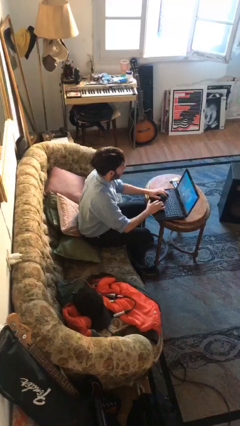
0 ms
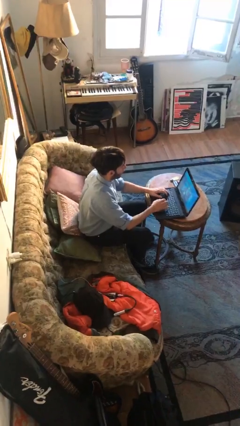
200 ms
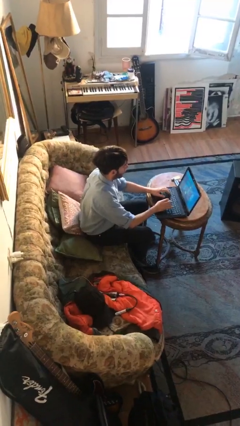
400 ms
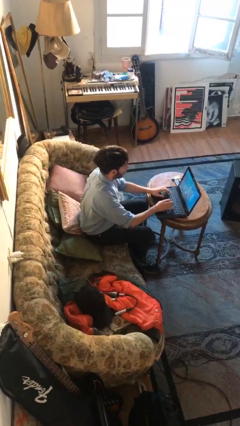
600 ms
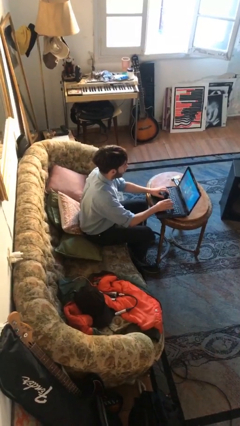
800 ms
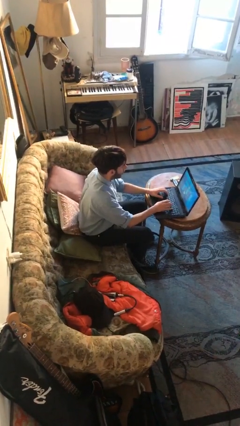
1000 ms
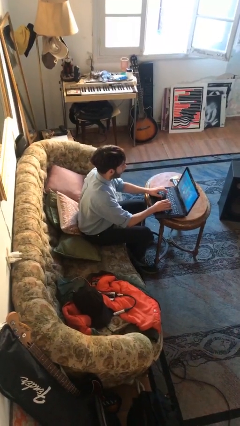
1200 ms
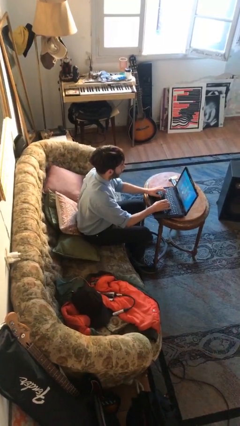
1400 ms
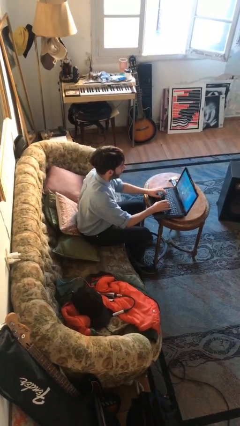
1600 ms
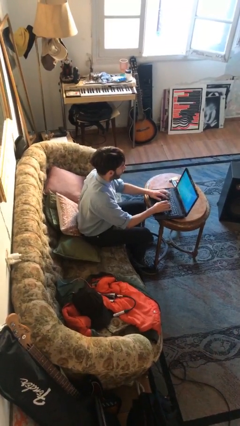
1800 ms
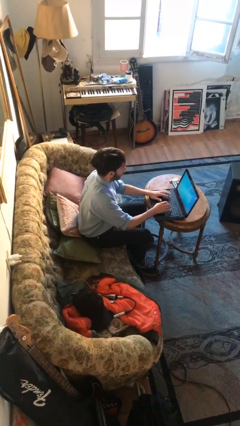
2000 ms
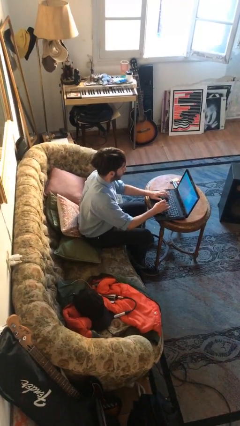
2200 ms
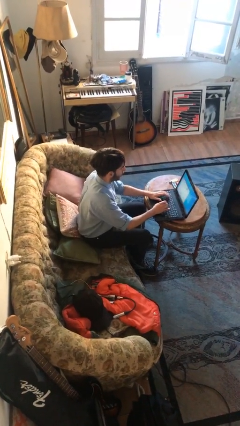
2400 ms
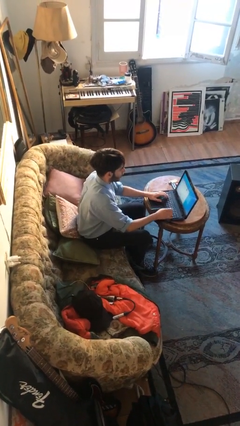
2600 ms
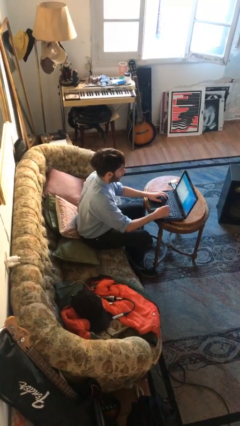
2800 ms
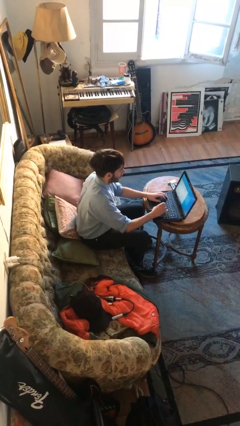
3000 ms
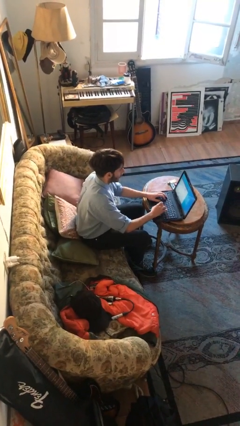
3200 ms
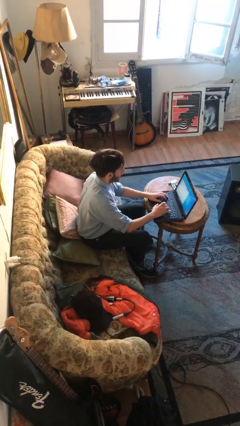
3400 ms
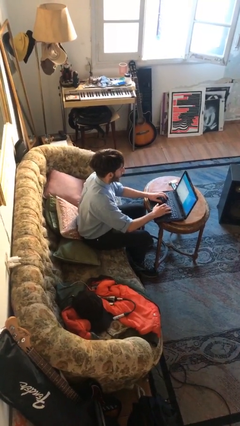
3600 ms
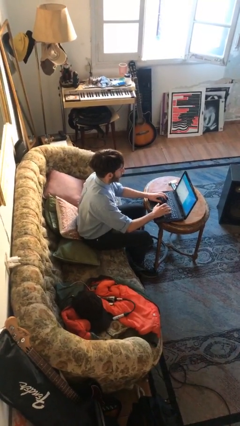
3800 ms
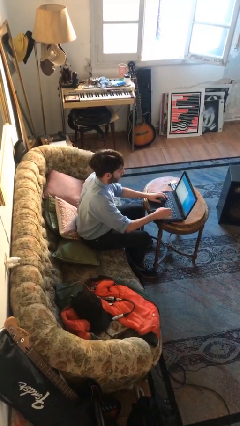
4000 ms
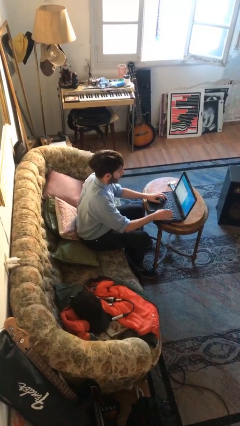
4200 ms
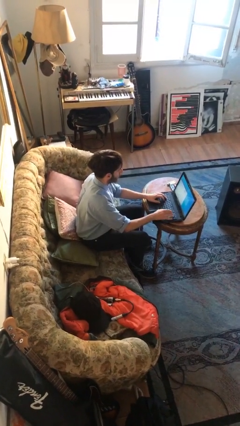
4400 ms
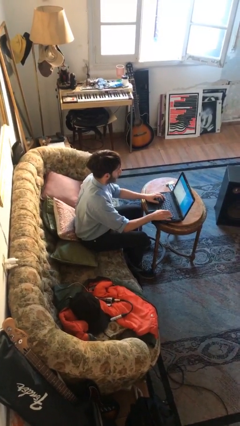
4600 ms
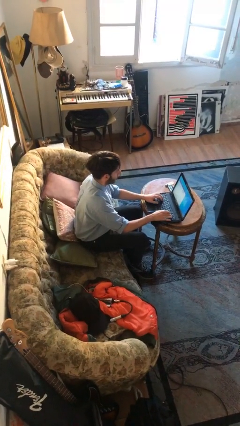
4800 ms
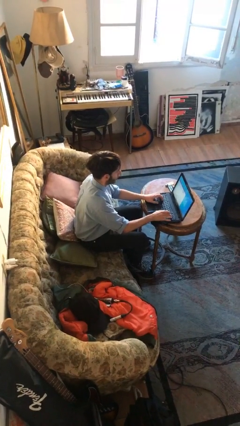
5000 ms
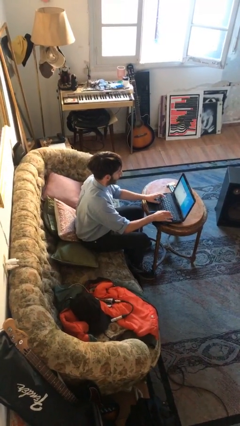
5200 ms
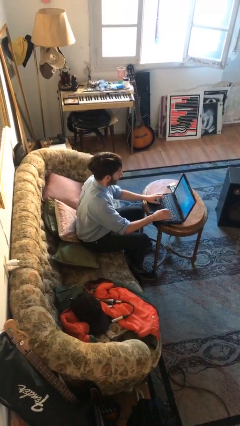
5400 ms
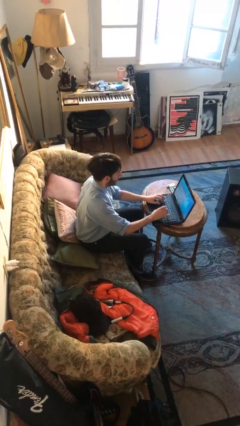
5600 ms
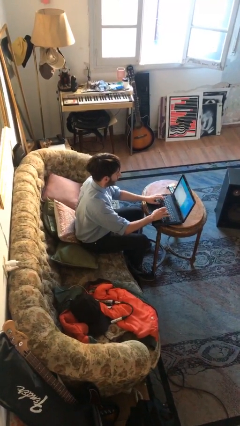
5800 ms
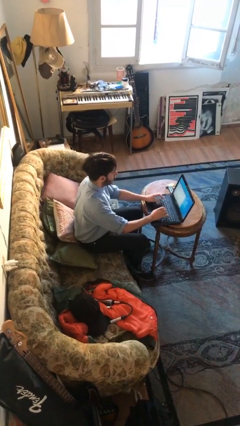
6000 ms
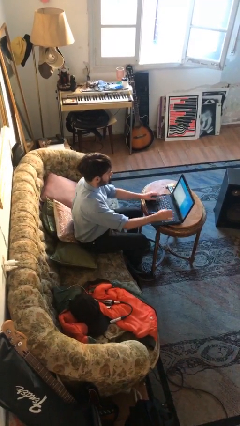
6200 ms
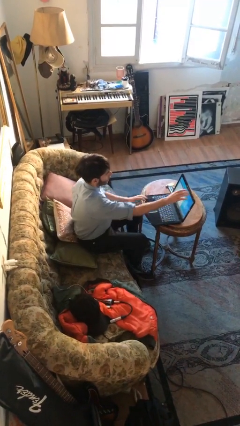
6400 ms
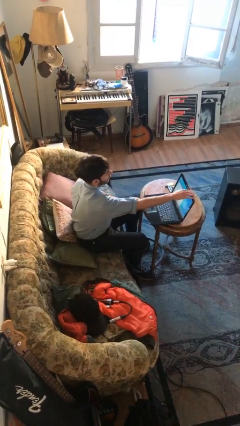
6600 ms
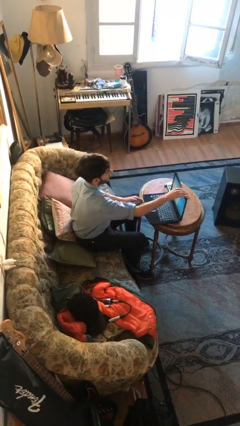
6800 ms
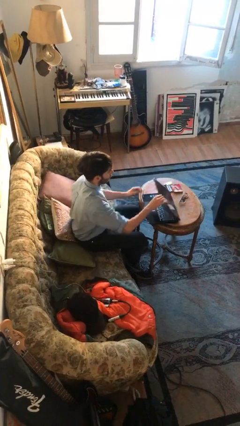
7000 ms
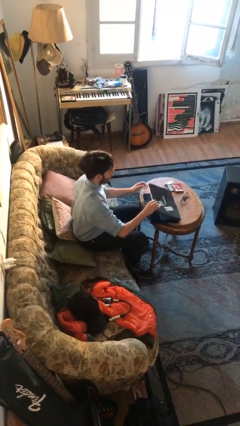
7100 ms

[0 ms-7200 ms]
person interacts with laptop

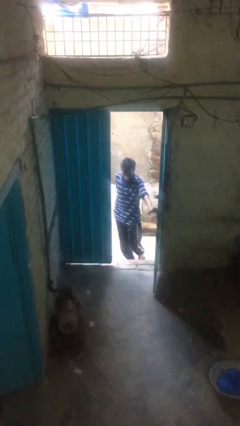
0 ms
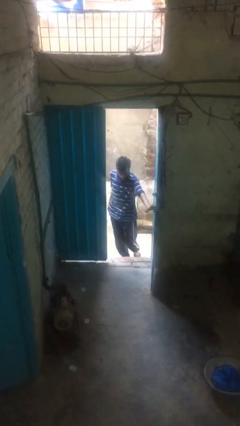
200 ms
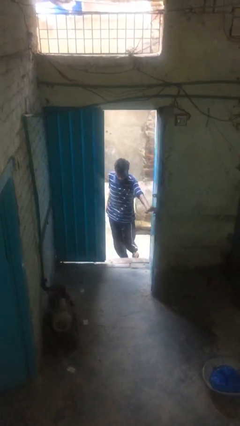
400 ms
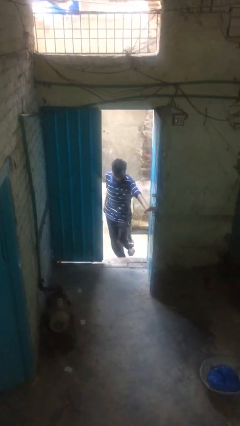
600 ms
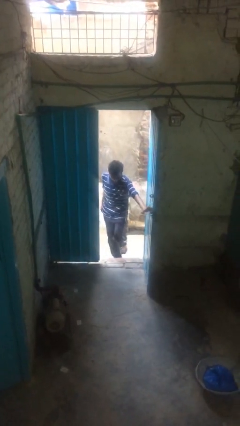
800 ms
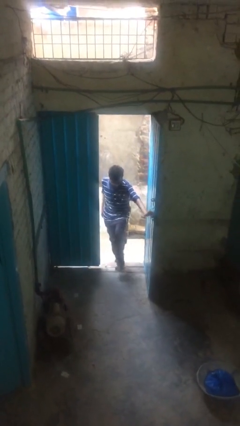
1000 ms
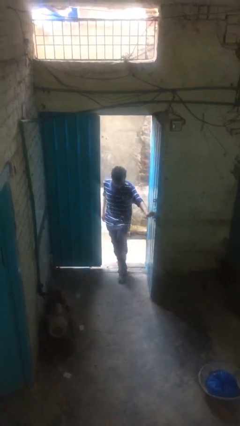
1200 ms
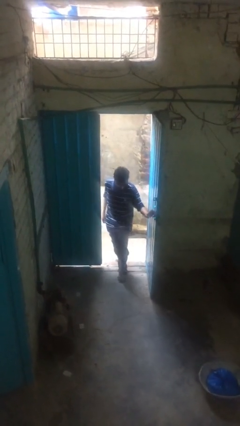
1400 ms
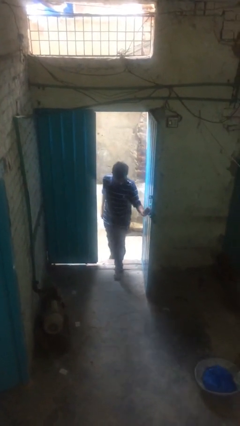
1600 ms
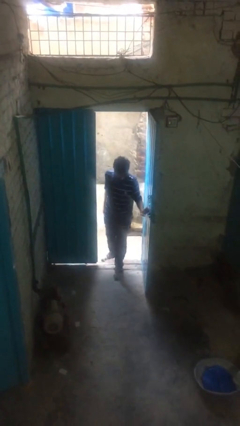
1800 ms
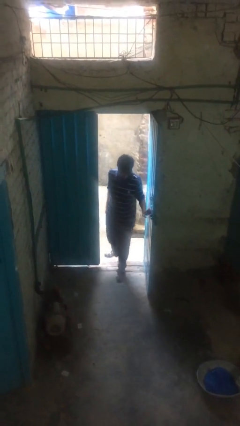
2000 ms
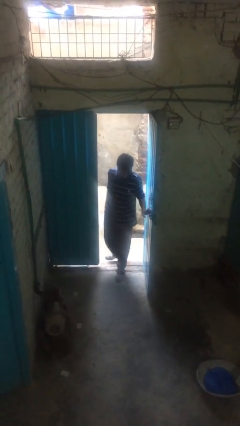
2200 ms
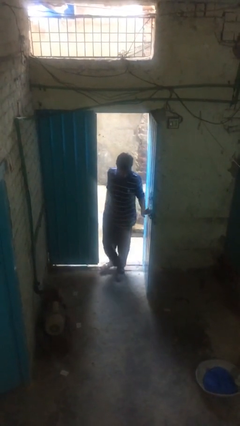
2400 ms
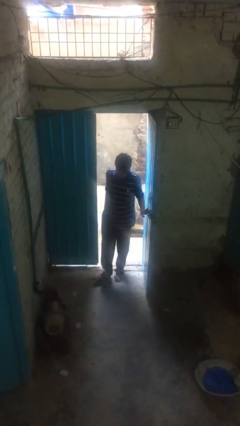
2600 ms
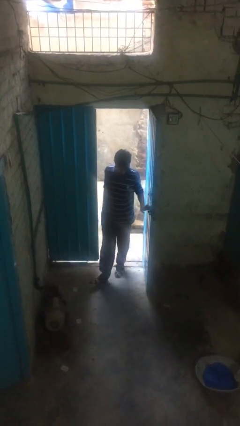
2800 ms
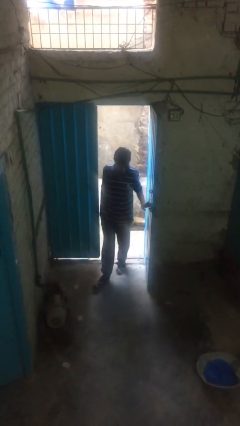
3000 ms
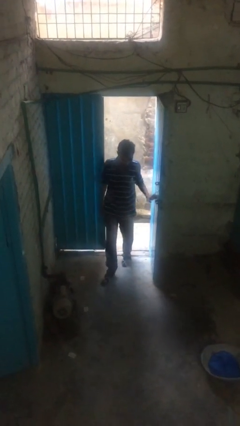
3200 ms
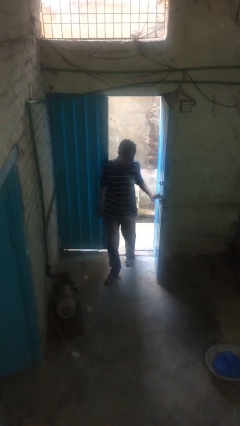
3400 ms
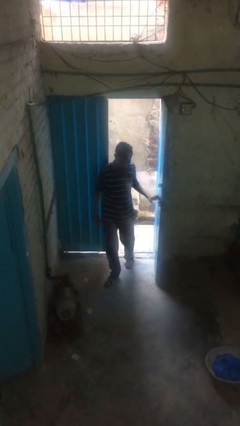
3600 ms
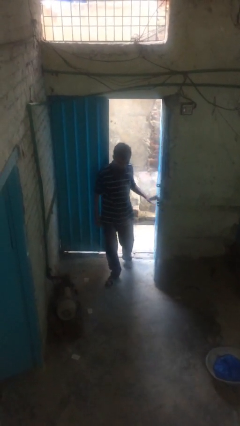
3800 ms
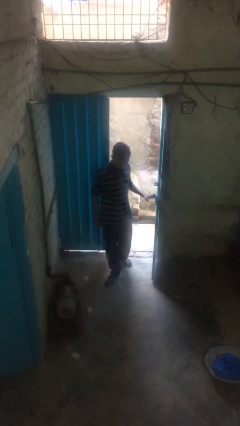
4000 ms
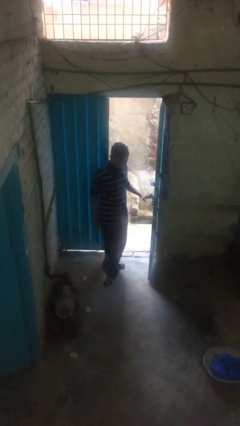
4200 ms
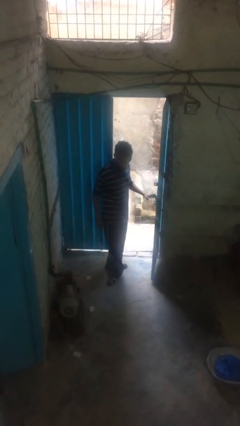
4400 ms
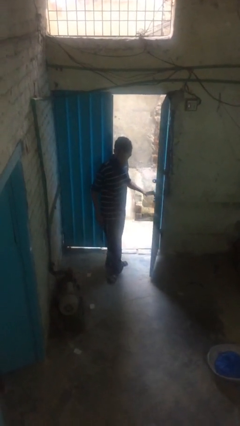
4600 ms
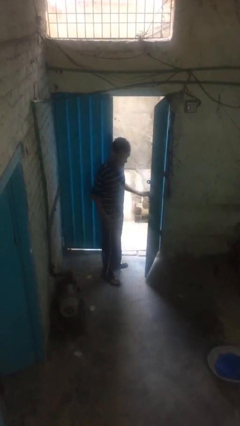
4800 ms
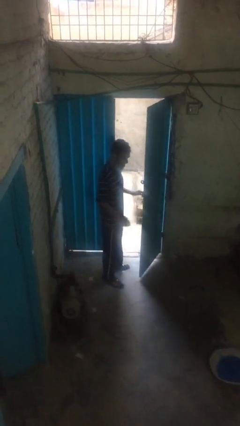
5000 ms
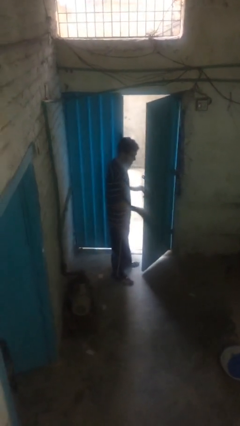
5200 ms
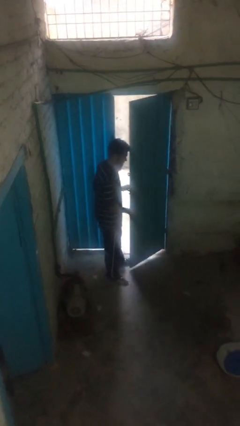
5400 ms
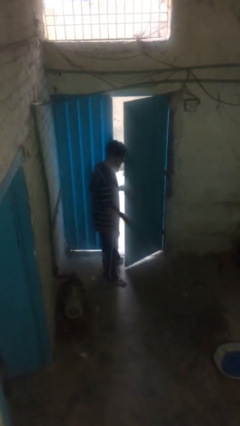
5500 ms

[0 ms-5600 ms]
person enters scene through structure

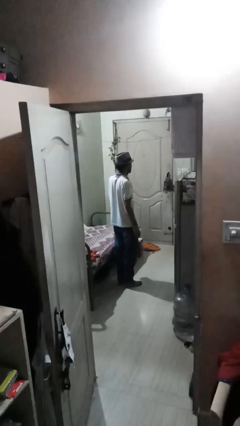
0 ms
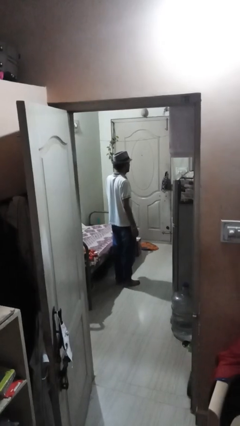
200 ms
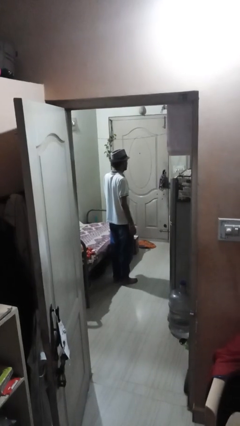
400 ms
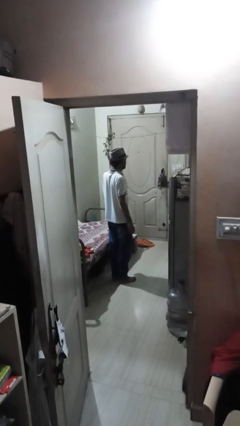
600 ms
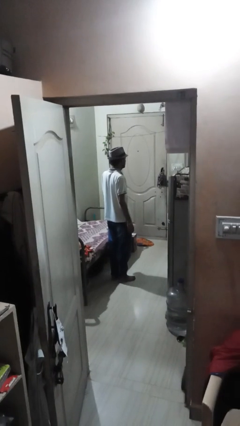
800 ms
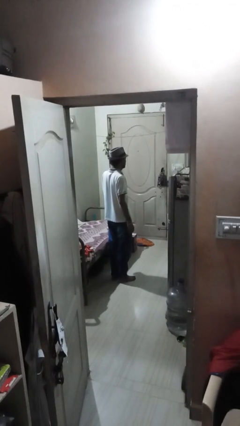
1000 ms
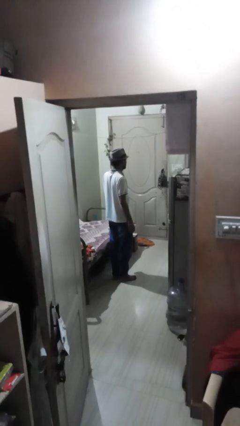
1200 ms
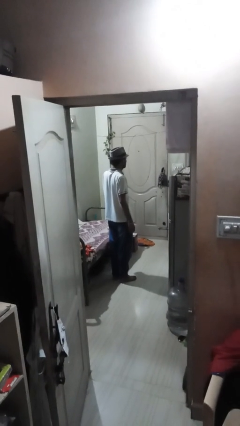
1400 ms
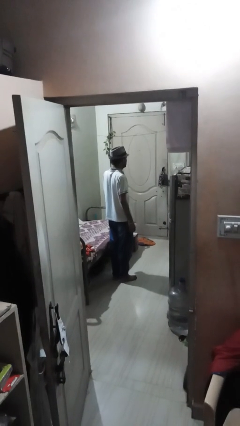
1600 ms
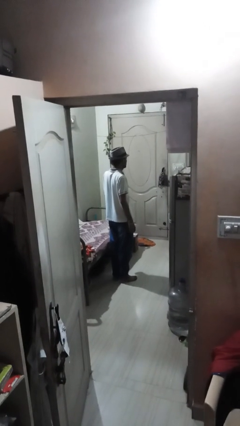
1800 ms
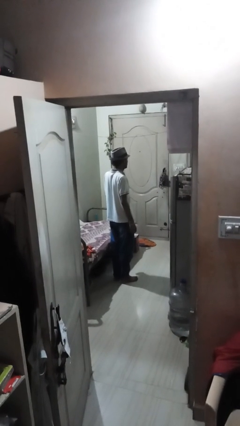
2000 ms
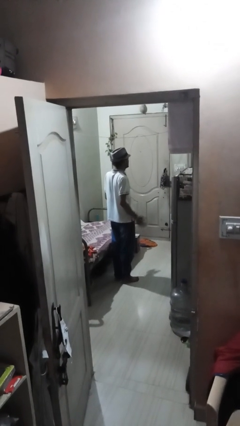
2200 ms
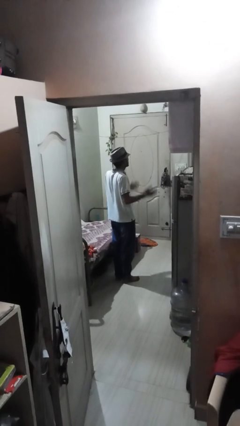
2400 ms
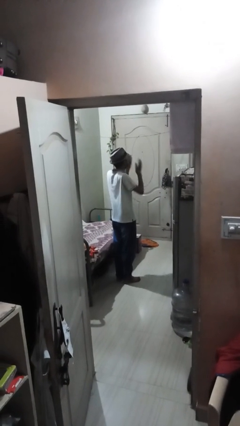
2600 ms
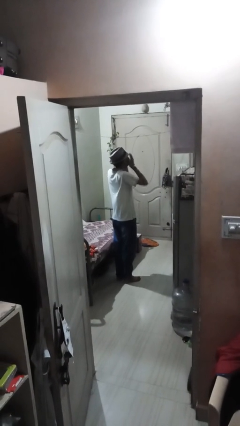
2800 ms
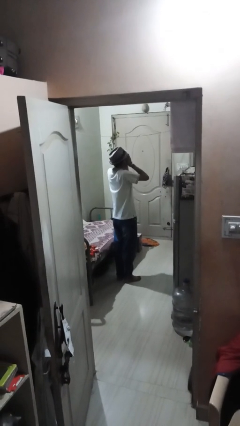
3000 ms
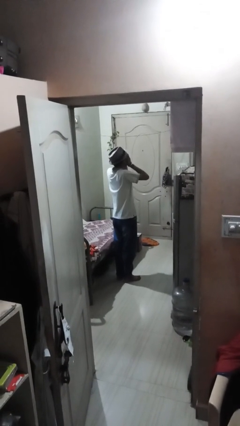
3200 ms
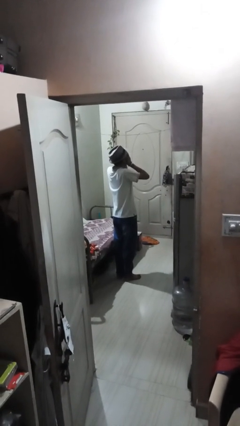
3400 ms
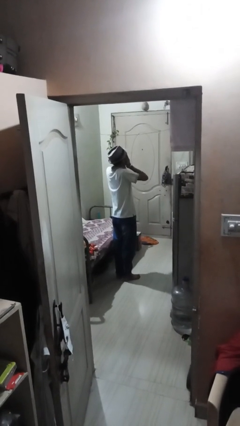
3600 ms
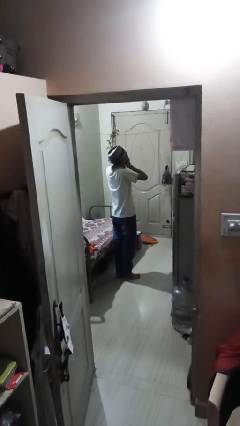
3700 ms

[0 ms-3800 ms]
person covers face with hands

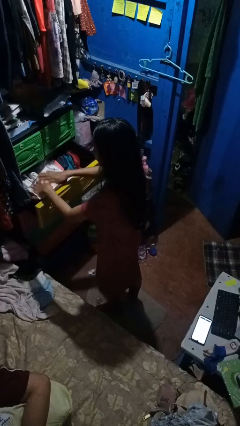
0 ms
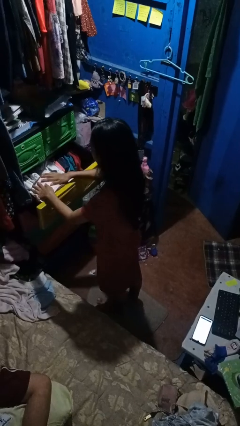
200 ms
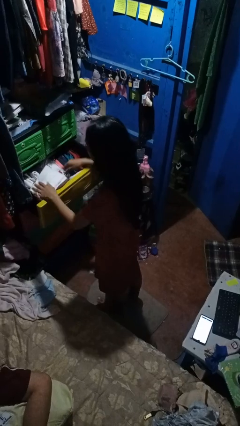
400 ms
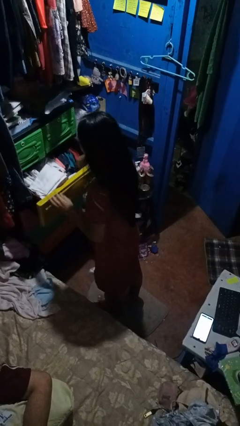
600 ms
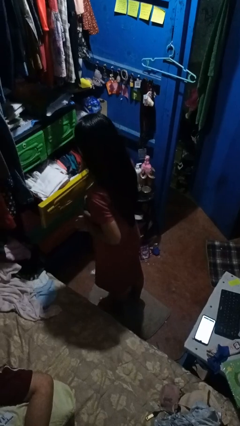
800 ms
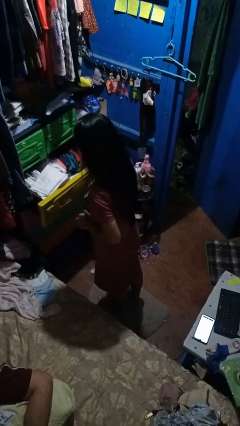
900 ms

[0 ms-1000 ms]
person puts clothes into dresser
